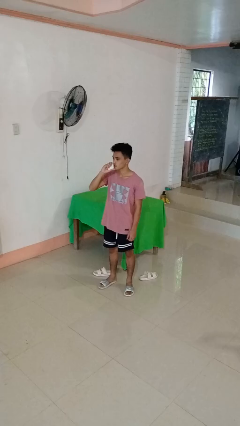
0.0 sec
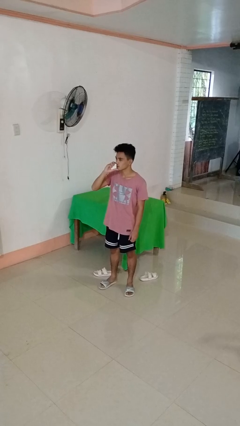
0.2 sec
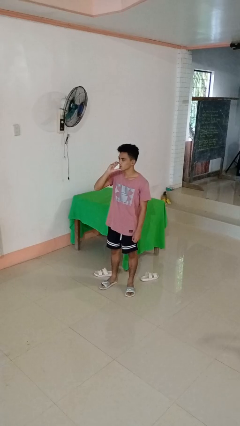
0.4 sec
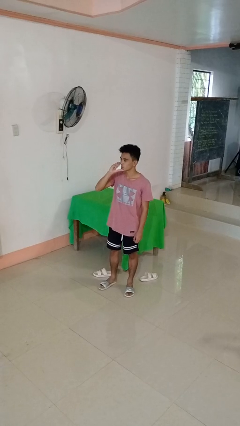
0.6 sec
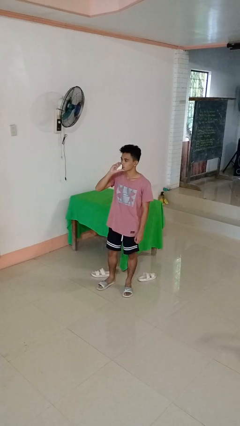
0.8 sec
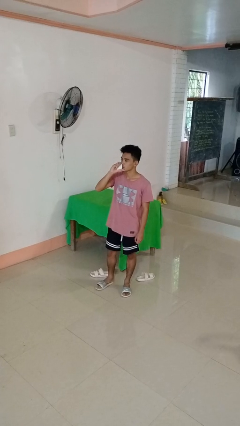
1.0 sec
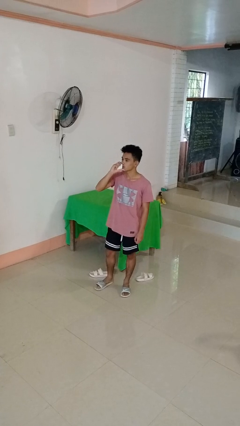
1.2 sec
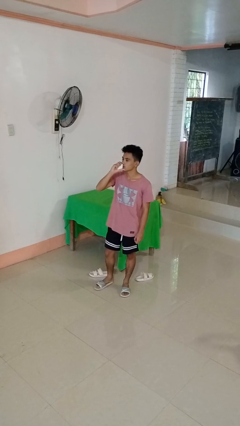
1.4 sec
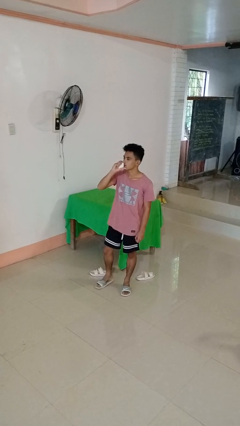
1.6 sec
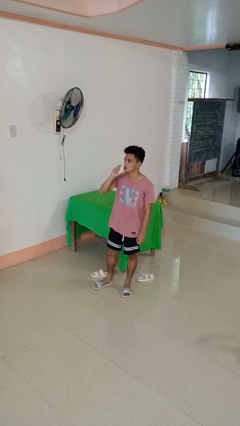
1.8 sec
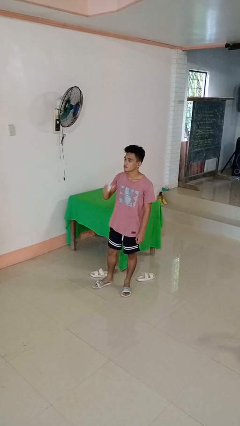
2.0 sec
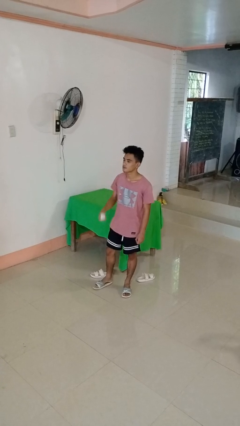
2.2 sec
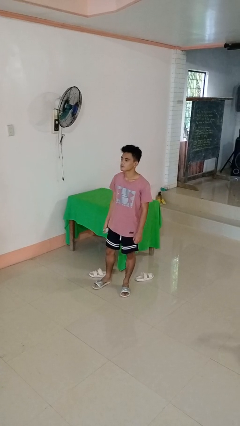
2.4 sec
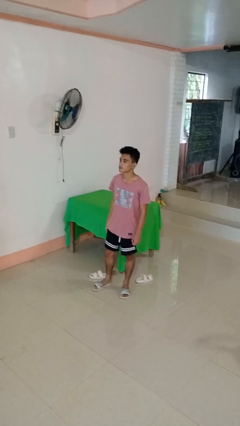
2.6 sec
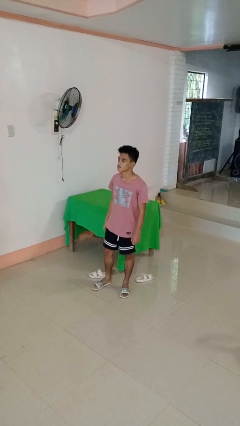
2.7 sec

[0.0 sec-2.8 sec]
person vapes

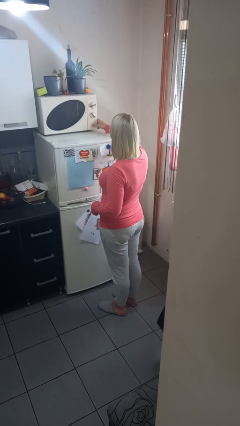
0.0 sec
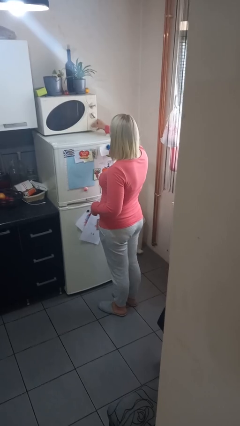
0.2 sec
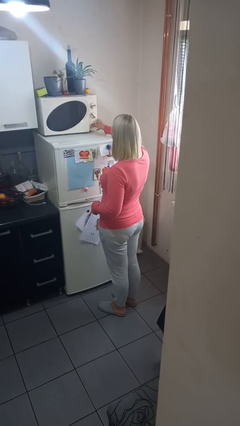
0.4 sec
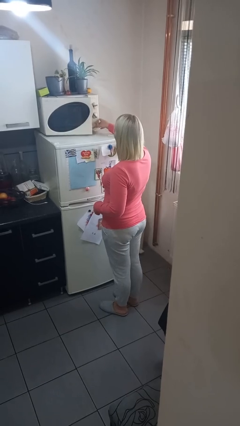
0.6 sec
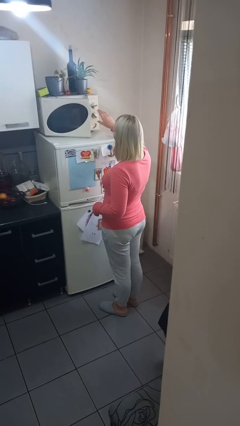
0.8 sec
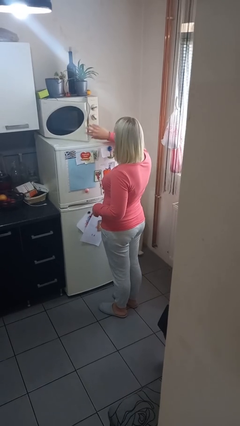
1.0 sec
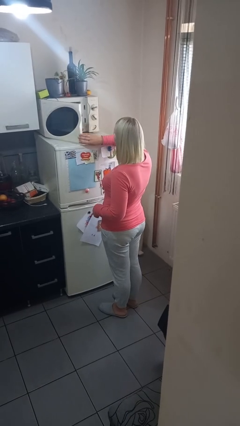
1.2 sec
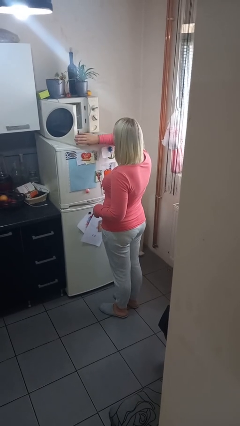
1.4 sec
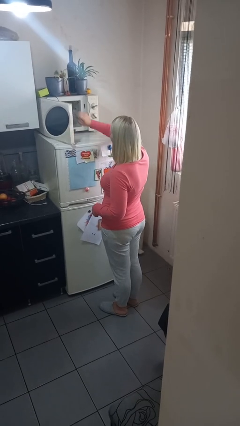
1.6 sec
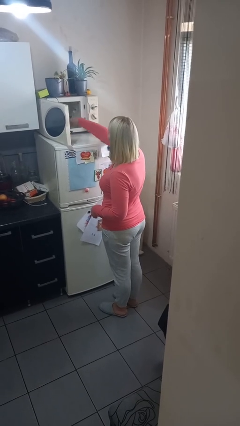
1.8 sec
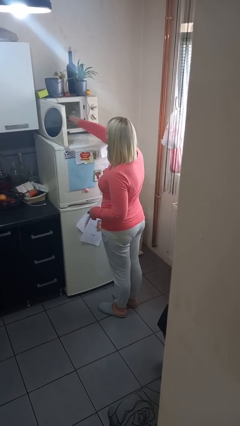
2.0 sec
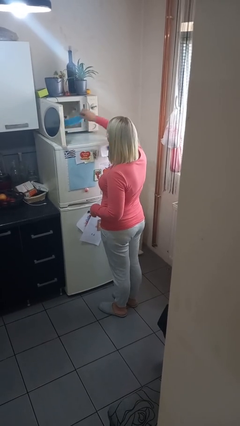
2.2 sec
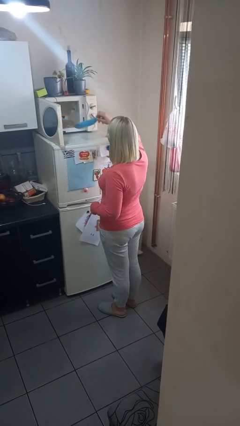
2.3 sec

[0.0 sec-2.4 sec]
person takes object from microwave

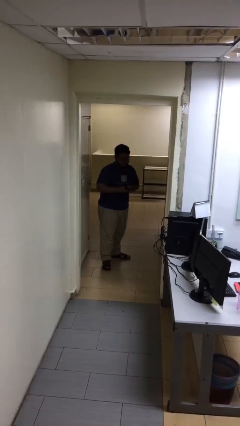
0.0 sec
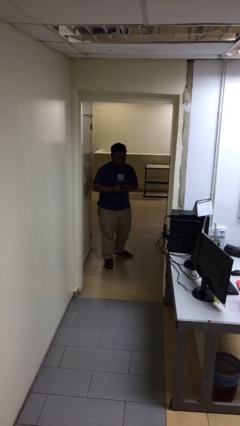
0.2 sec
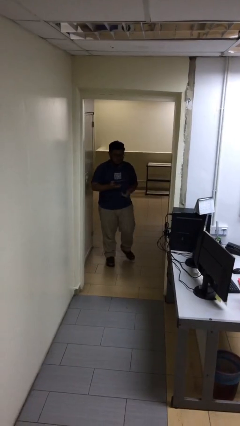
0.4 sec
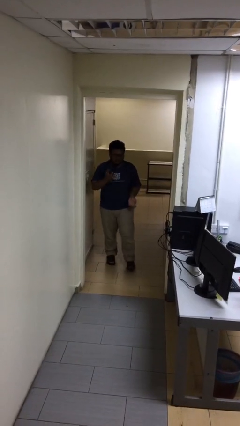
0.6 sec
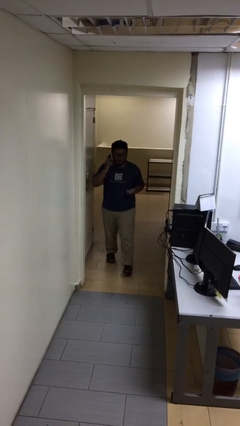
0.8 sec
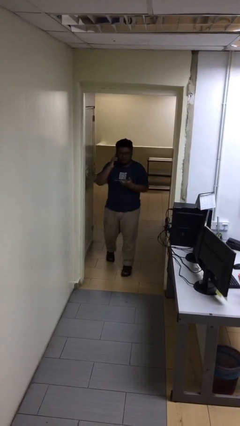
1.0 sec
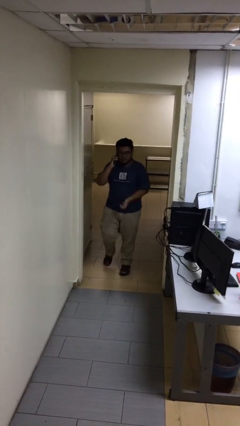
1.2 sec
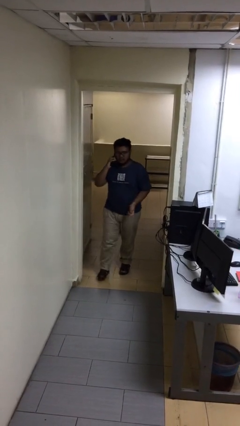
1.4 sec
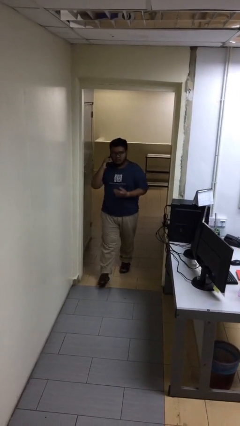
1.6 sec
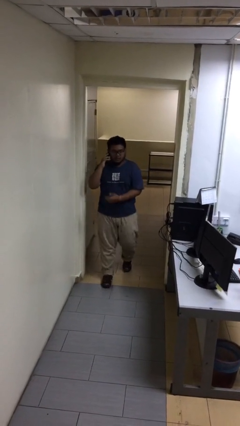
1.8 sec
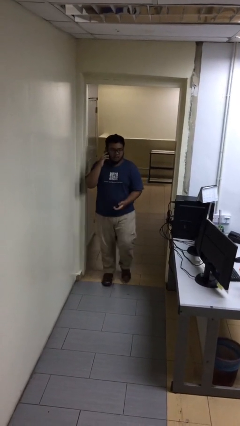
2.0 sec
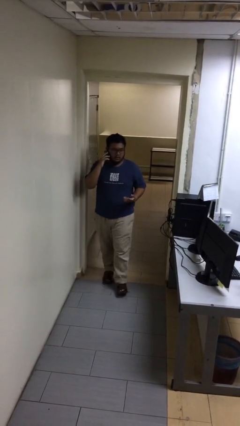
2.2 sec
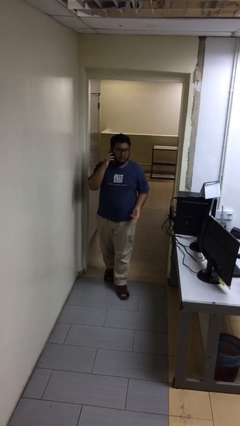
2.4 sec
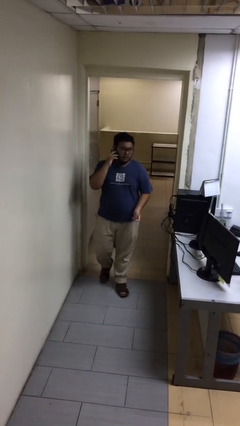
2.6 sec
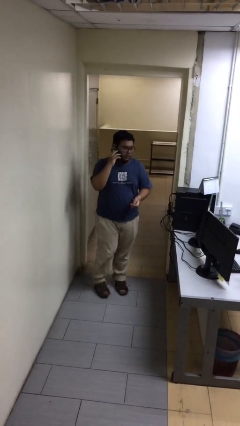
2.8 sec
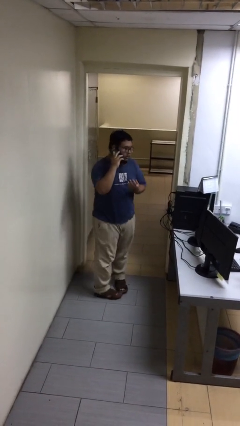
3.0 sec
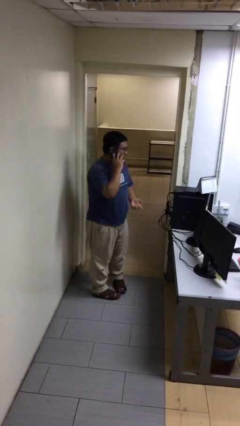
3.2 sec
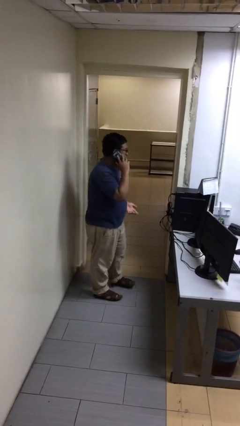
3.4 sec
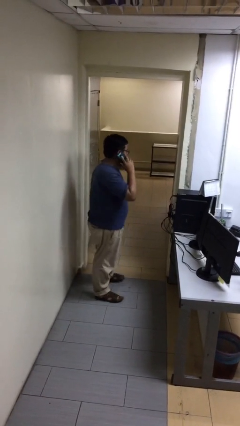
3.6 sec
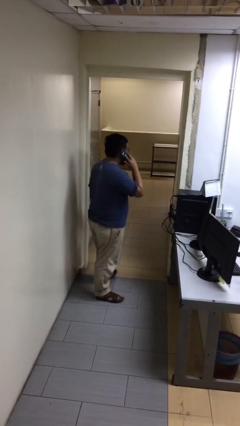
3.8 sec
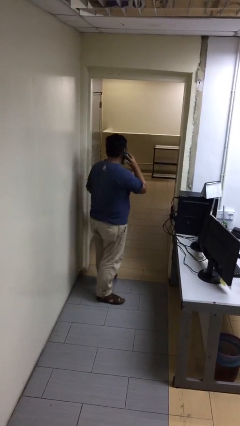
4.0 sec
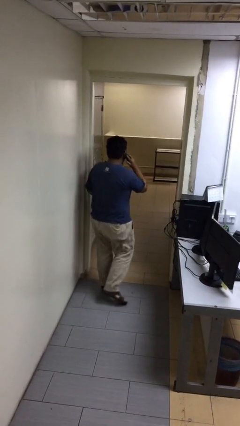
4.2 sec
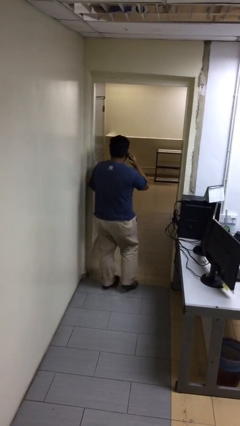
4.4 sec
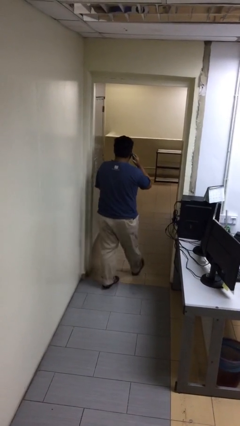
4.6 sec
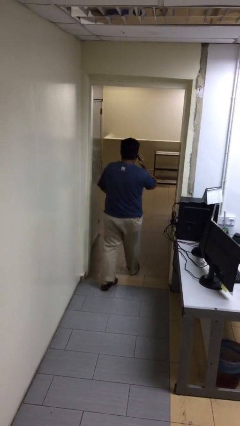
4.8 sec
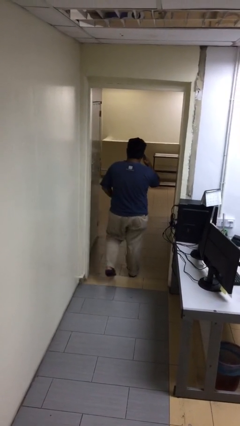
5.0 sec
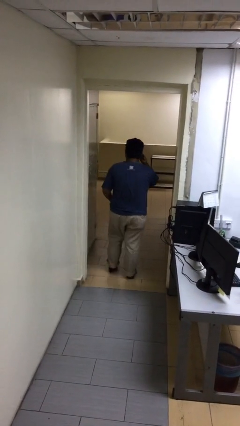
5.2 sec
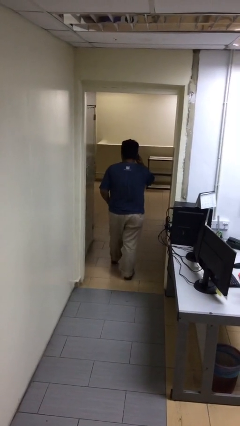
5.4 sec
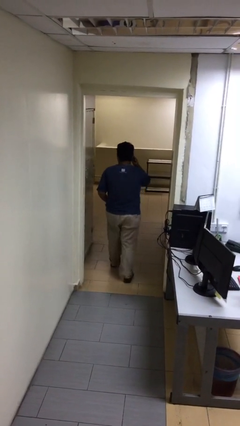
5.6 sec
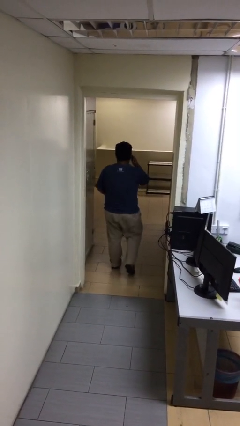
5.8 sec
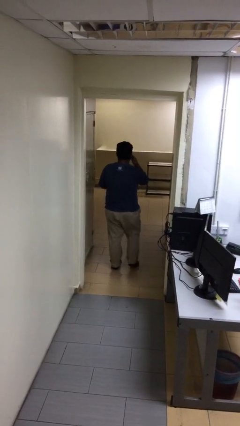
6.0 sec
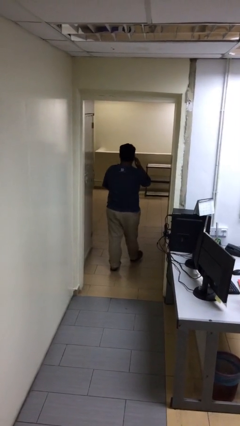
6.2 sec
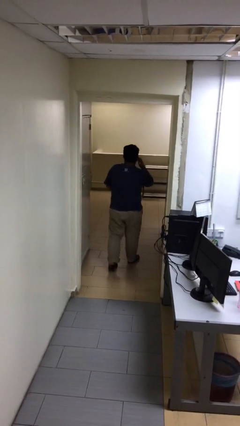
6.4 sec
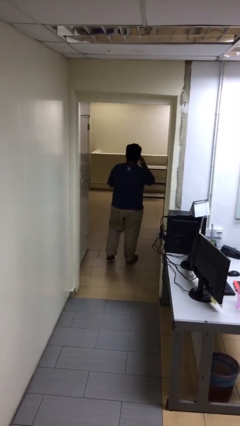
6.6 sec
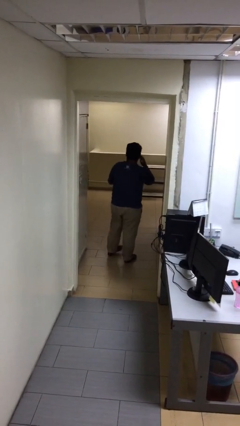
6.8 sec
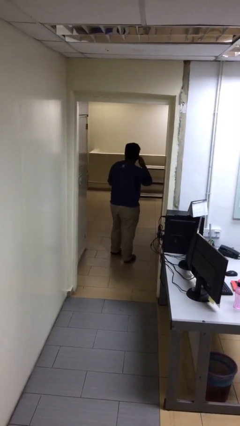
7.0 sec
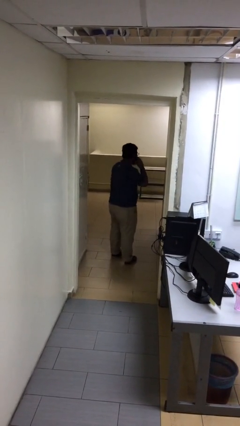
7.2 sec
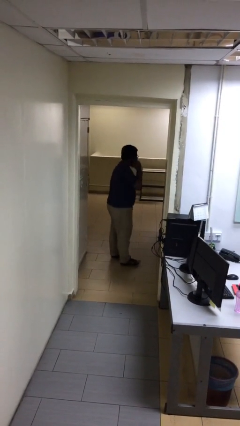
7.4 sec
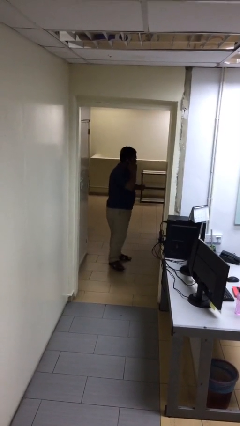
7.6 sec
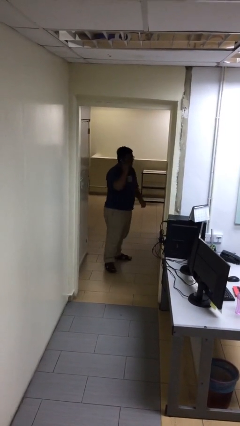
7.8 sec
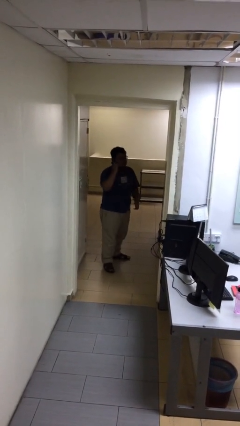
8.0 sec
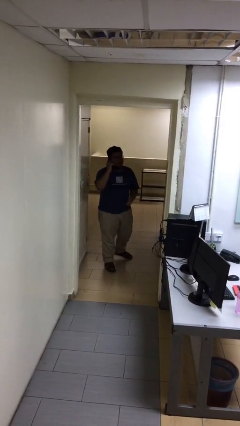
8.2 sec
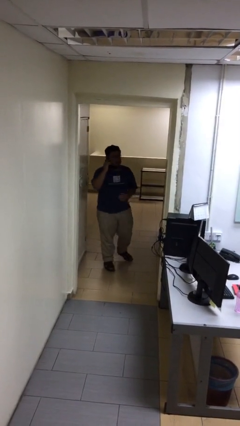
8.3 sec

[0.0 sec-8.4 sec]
person talks on phone

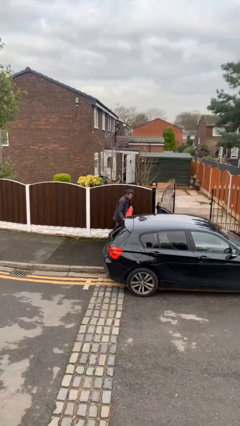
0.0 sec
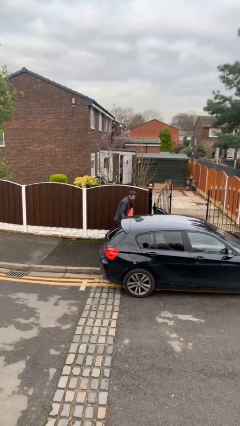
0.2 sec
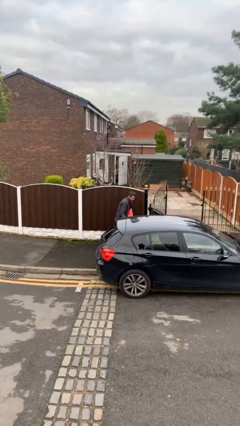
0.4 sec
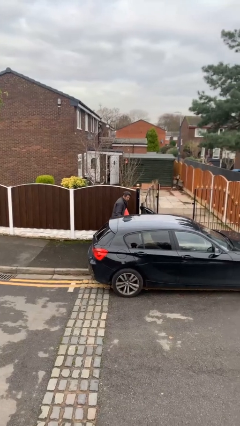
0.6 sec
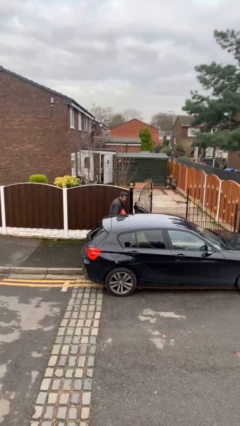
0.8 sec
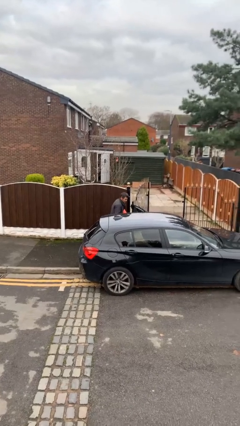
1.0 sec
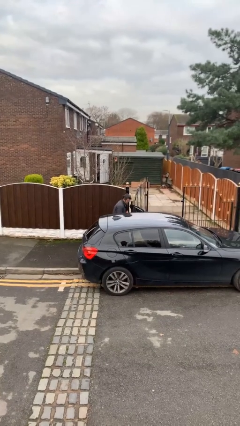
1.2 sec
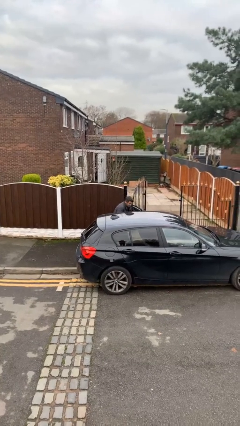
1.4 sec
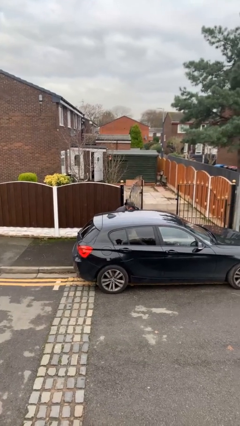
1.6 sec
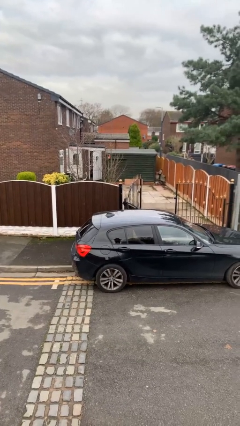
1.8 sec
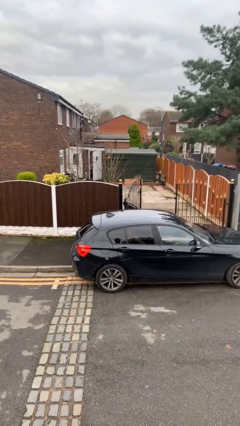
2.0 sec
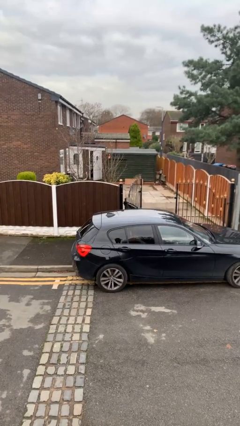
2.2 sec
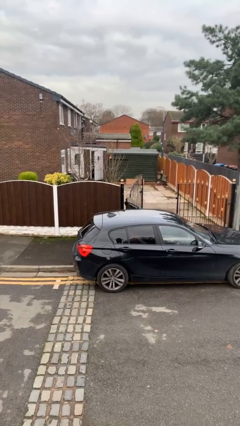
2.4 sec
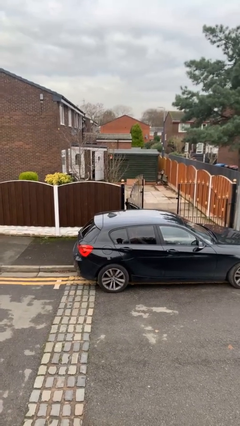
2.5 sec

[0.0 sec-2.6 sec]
person loads car

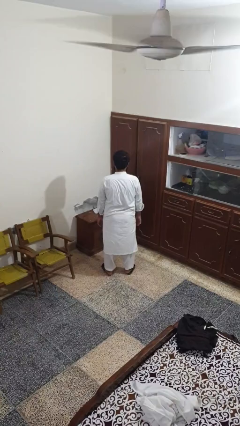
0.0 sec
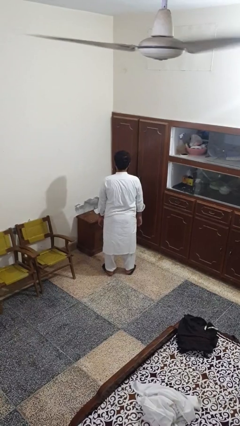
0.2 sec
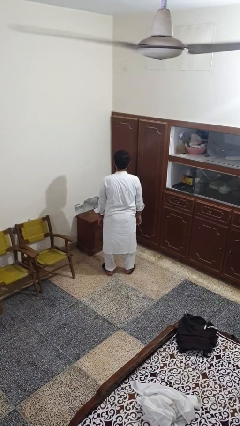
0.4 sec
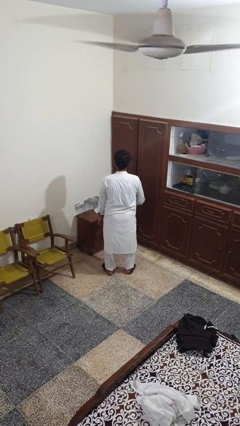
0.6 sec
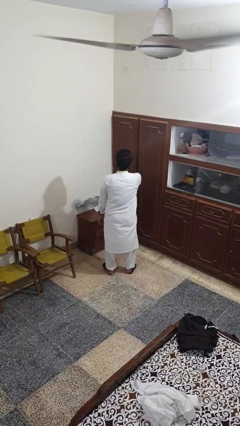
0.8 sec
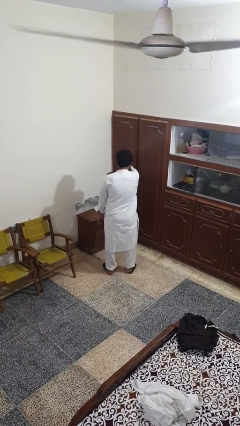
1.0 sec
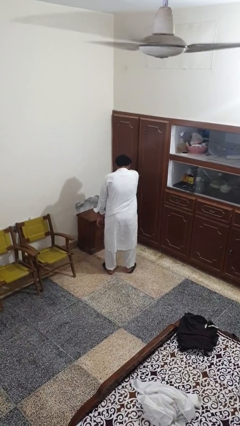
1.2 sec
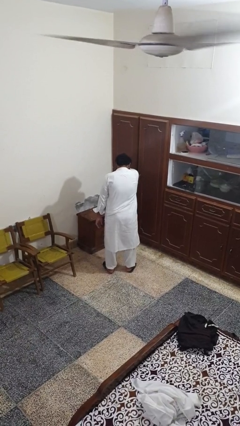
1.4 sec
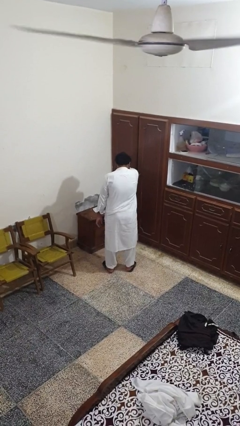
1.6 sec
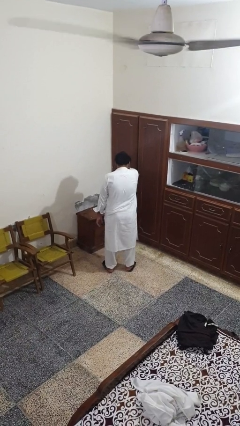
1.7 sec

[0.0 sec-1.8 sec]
person sneezes into arm
